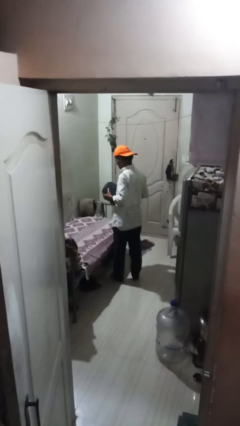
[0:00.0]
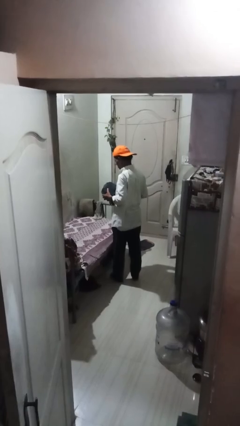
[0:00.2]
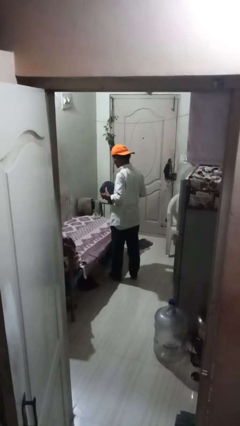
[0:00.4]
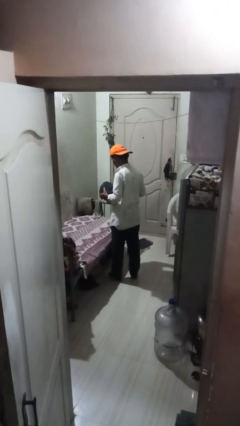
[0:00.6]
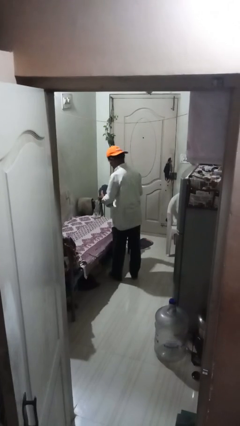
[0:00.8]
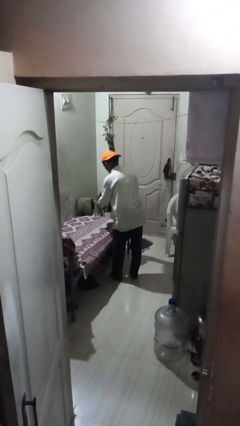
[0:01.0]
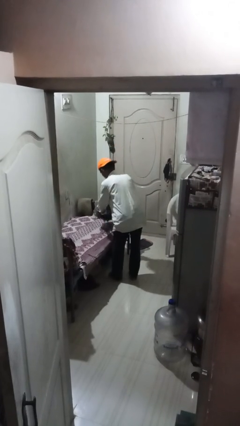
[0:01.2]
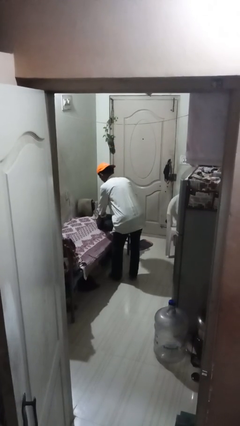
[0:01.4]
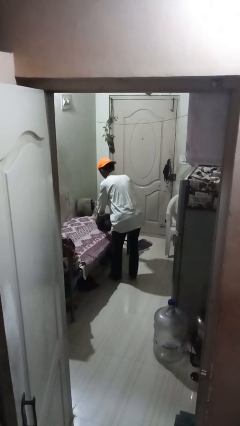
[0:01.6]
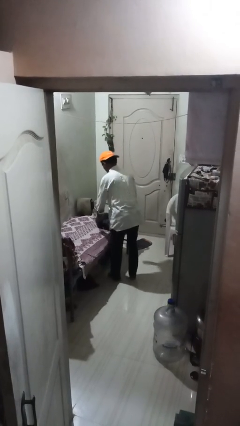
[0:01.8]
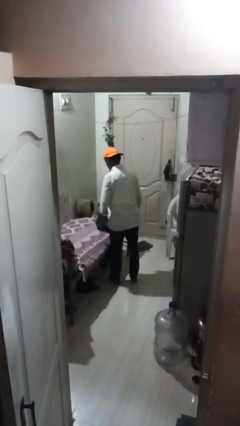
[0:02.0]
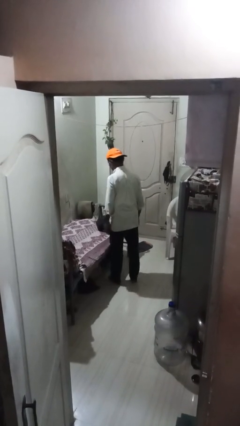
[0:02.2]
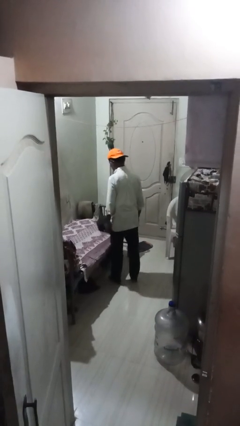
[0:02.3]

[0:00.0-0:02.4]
person puts down object on bed

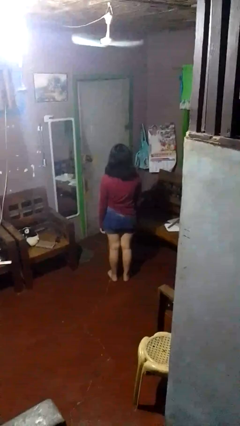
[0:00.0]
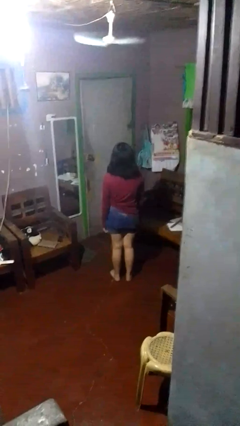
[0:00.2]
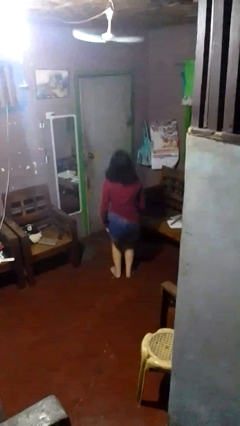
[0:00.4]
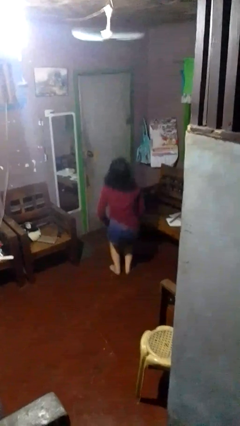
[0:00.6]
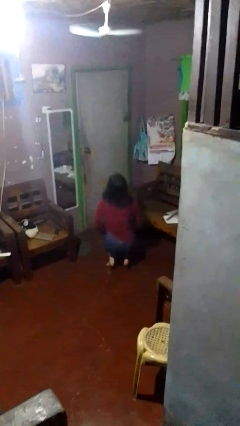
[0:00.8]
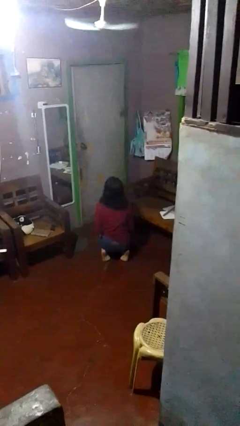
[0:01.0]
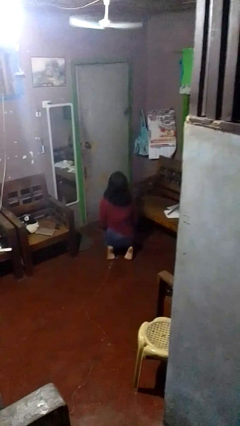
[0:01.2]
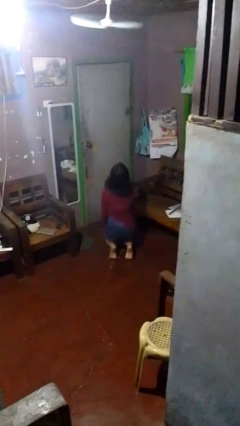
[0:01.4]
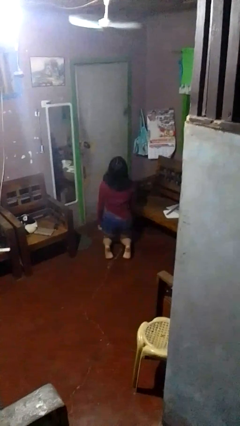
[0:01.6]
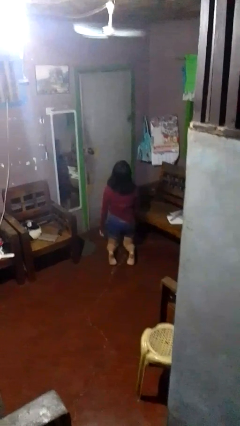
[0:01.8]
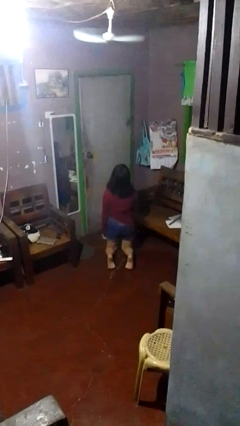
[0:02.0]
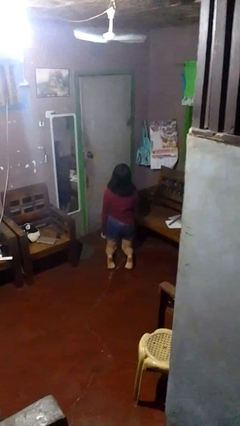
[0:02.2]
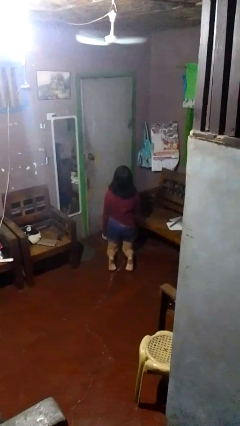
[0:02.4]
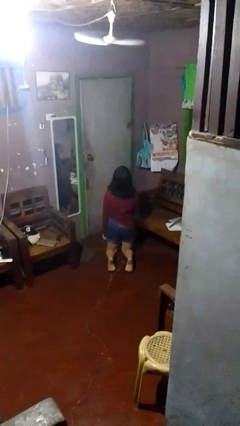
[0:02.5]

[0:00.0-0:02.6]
person kneels

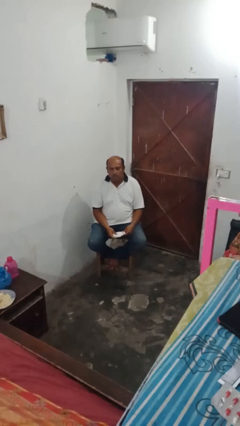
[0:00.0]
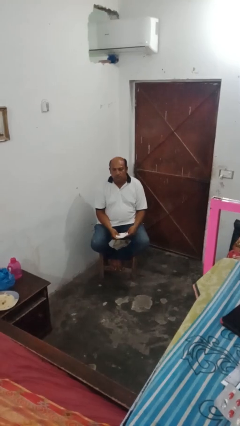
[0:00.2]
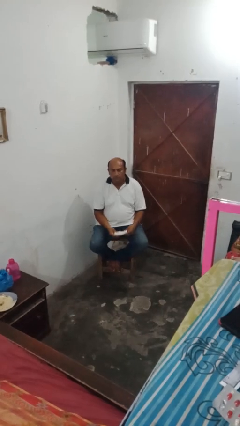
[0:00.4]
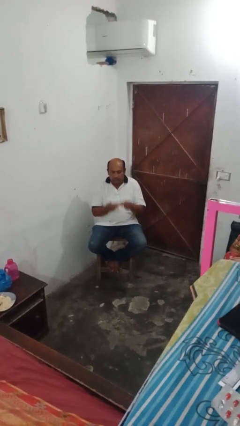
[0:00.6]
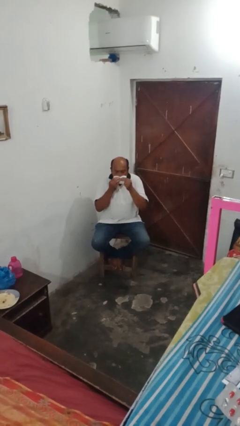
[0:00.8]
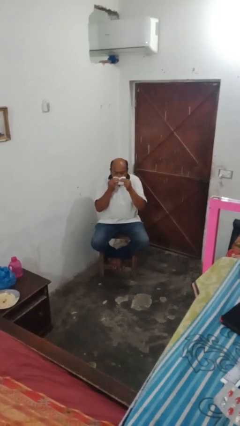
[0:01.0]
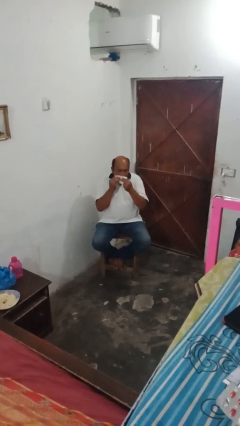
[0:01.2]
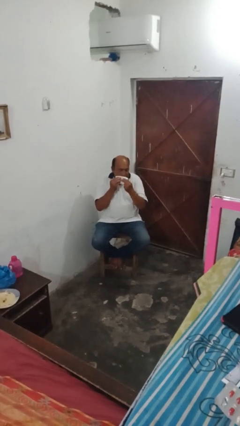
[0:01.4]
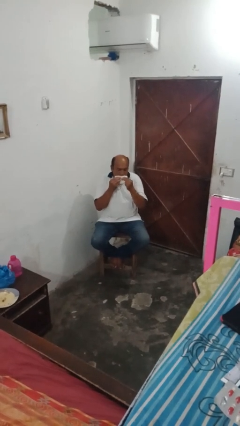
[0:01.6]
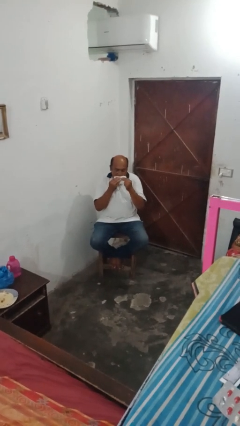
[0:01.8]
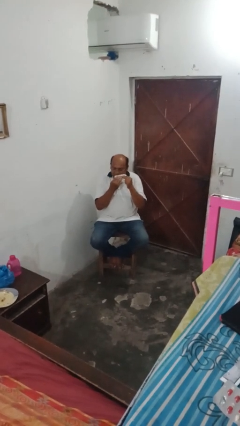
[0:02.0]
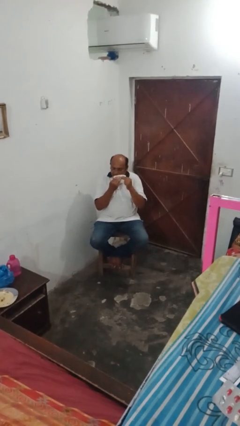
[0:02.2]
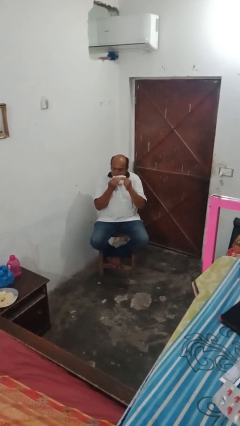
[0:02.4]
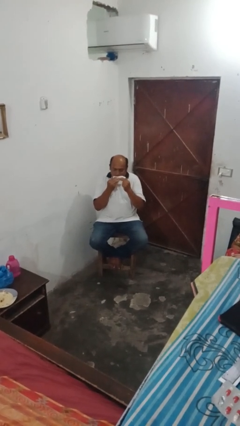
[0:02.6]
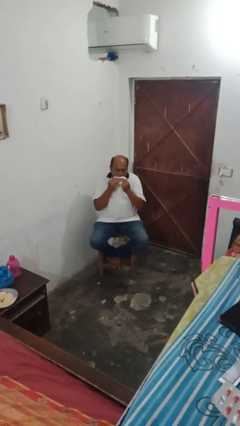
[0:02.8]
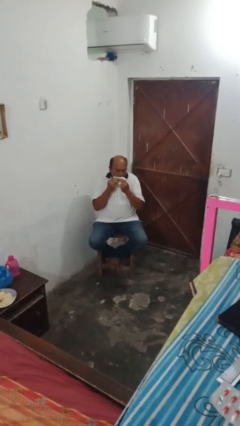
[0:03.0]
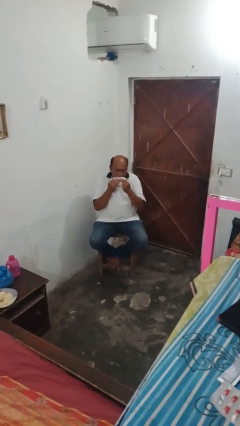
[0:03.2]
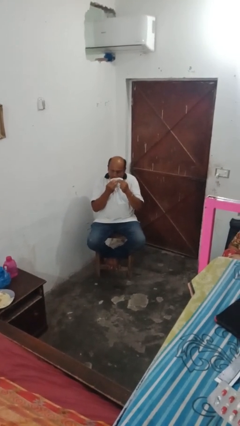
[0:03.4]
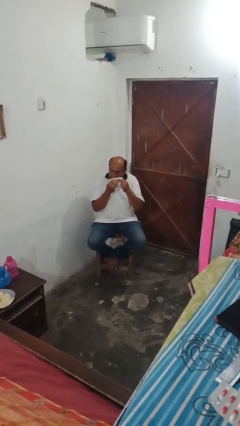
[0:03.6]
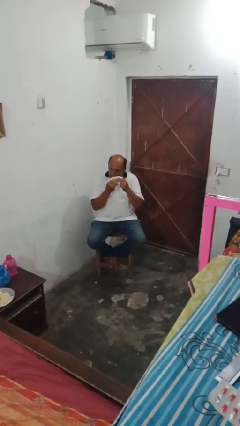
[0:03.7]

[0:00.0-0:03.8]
person wipes mouth with napkin

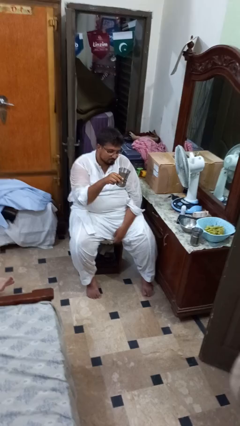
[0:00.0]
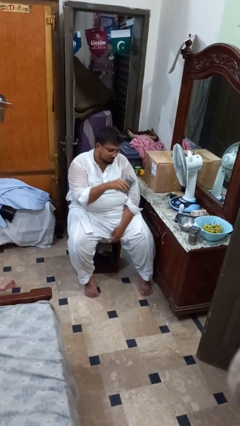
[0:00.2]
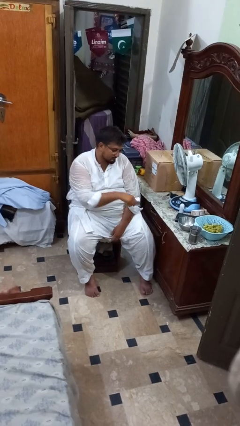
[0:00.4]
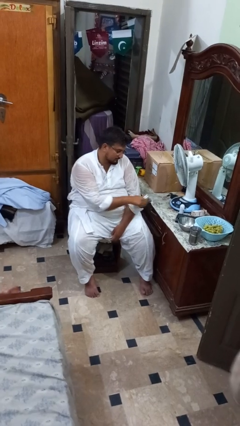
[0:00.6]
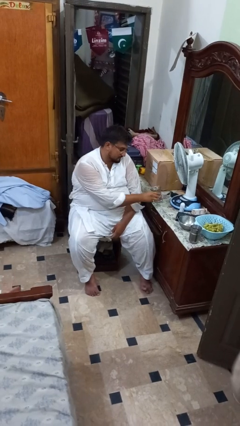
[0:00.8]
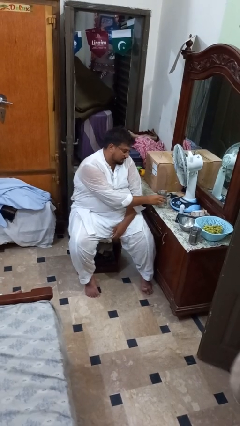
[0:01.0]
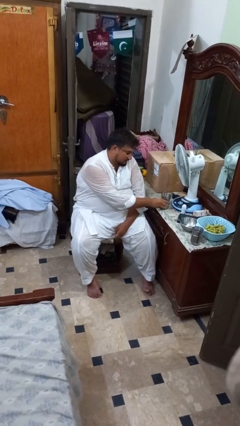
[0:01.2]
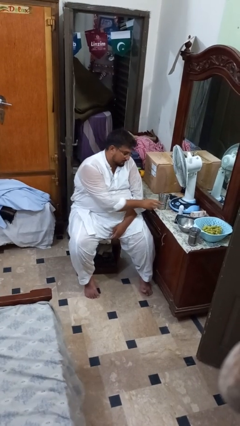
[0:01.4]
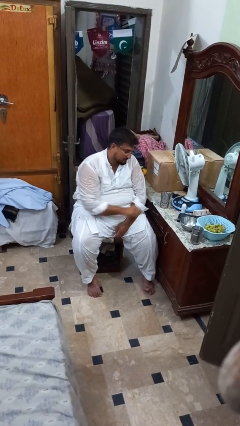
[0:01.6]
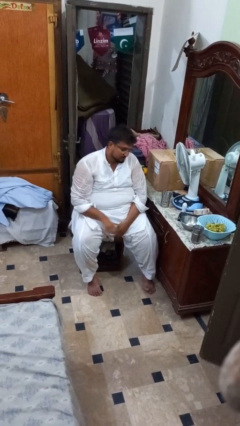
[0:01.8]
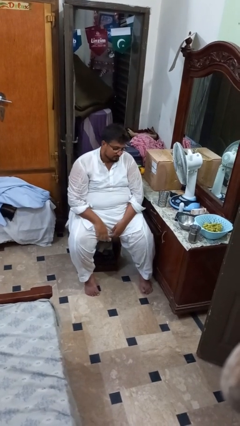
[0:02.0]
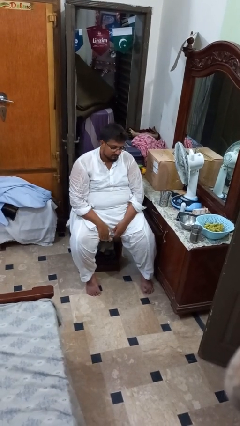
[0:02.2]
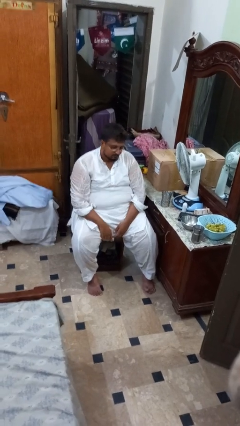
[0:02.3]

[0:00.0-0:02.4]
person puts down object on table

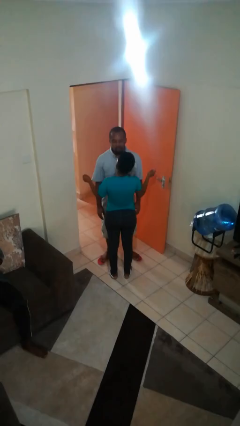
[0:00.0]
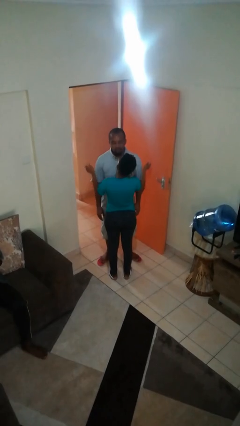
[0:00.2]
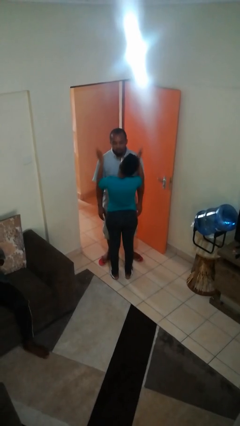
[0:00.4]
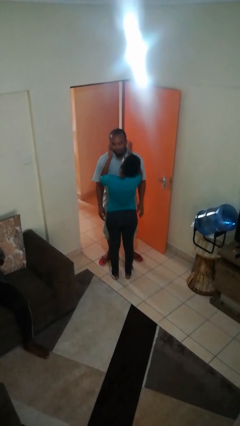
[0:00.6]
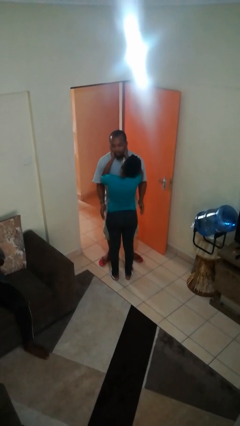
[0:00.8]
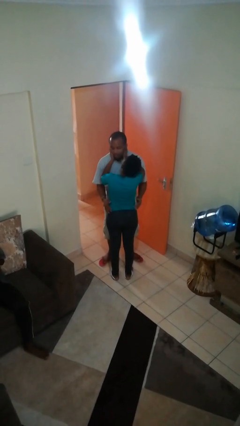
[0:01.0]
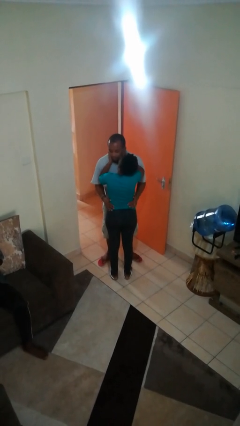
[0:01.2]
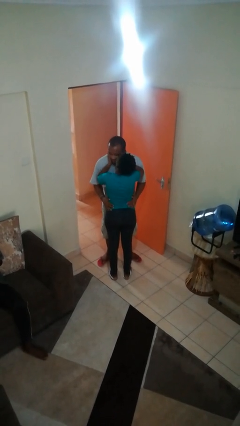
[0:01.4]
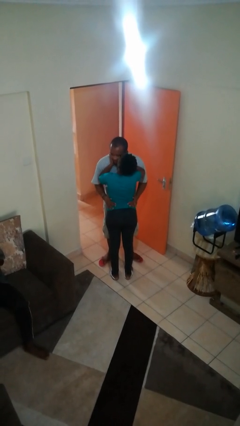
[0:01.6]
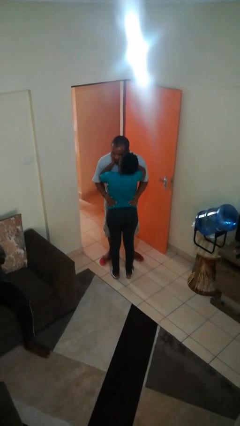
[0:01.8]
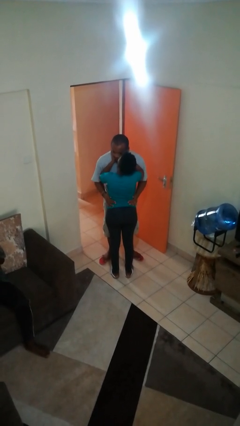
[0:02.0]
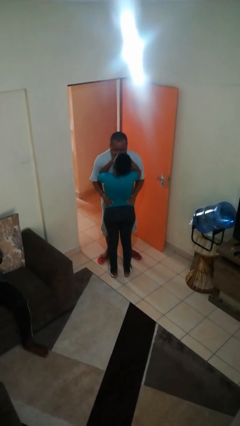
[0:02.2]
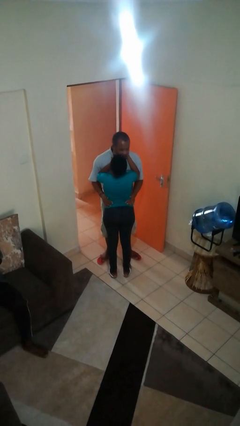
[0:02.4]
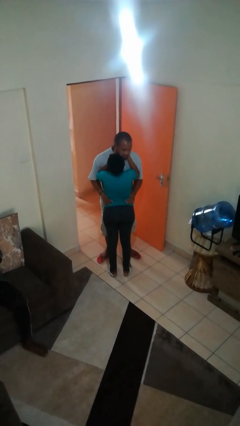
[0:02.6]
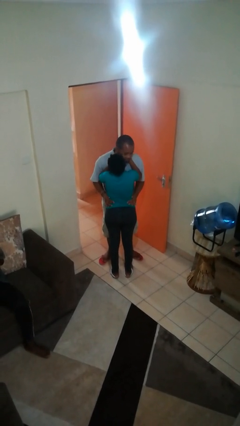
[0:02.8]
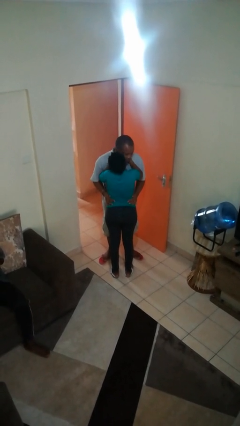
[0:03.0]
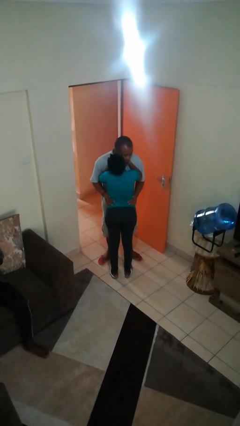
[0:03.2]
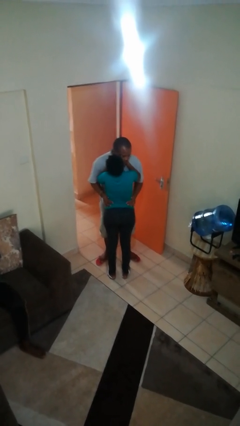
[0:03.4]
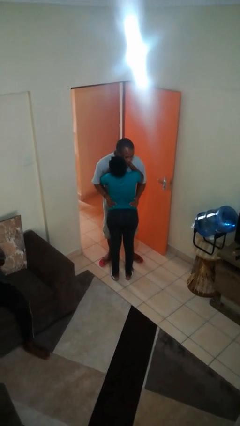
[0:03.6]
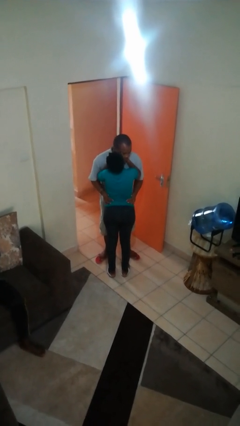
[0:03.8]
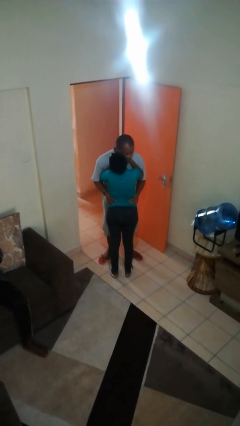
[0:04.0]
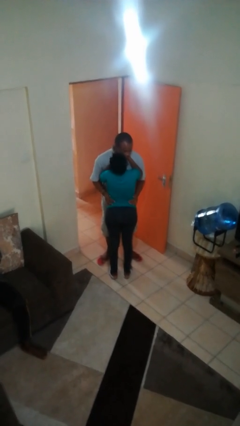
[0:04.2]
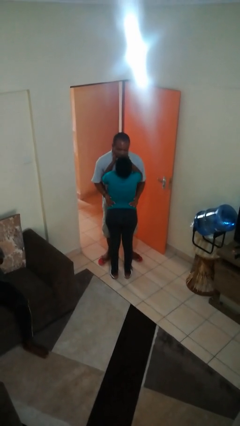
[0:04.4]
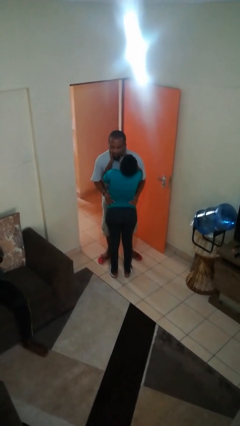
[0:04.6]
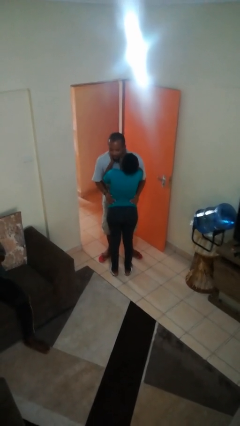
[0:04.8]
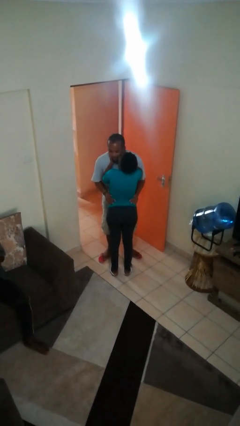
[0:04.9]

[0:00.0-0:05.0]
person kisses cheek of person

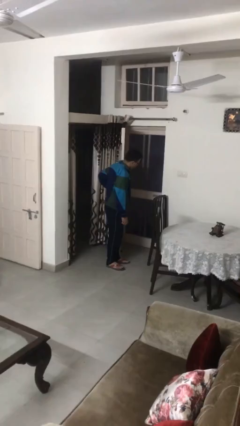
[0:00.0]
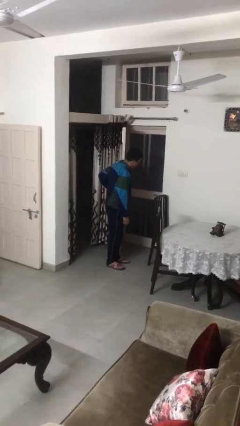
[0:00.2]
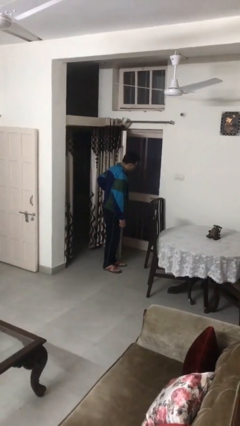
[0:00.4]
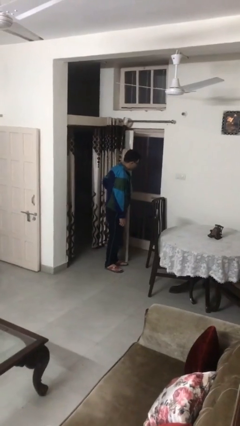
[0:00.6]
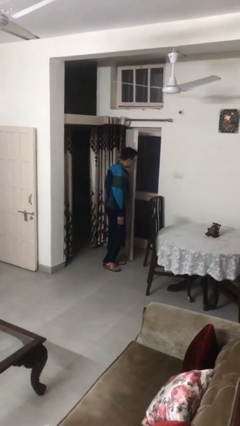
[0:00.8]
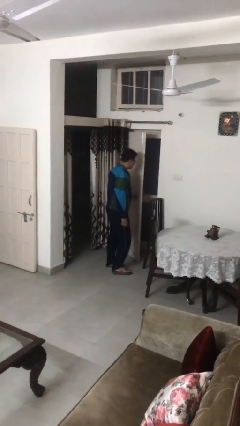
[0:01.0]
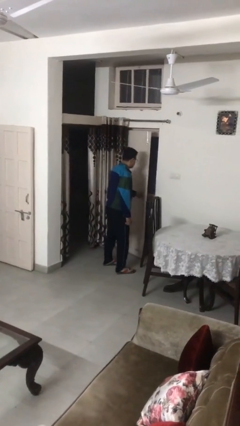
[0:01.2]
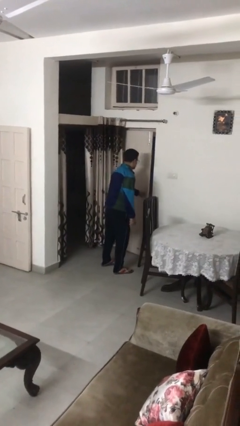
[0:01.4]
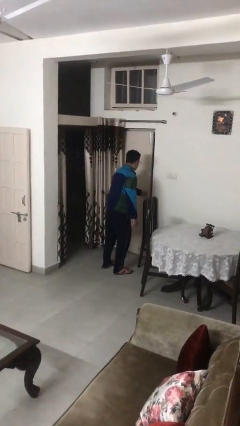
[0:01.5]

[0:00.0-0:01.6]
person closes facility door
